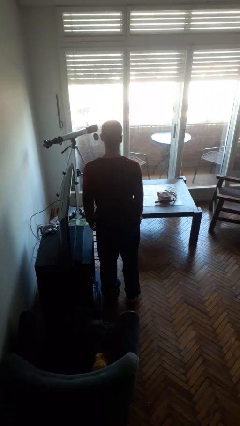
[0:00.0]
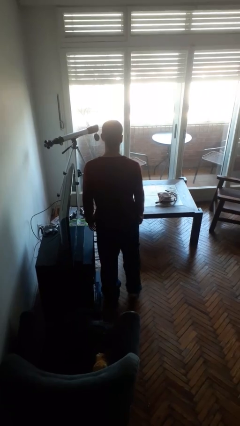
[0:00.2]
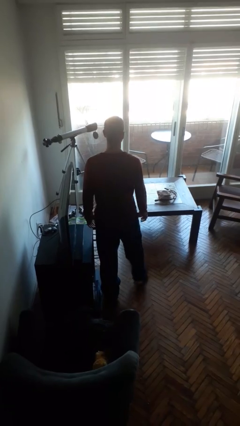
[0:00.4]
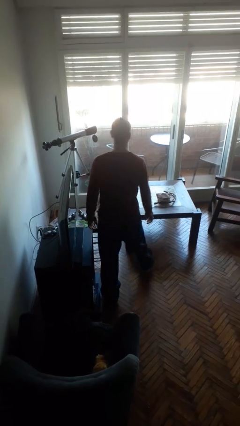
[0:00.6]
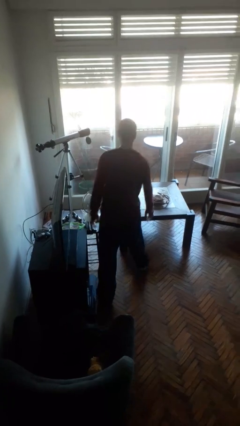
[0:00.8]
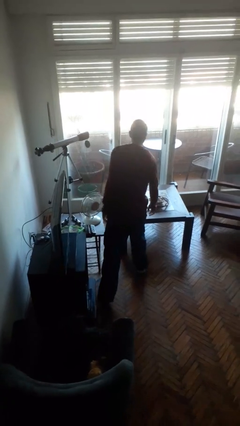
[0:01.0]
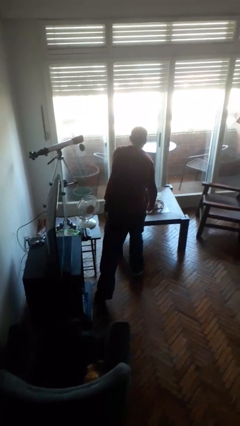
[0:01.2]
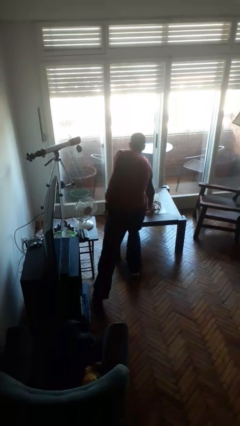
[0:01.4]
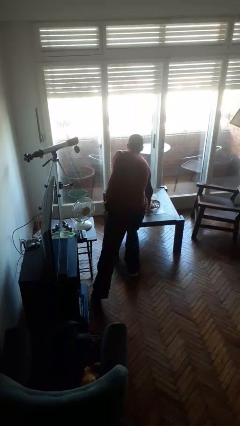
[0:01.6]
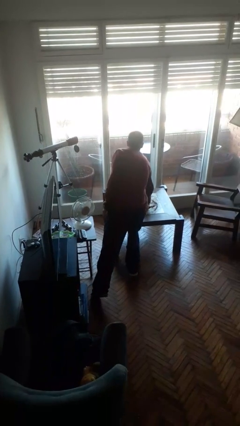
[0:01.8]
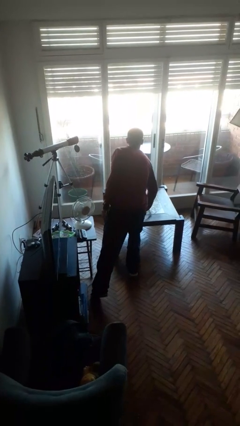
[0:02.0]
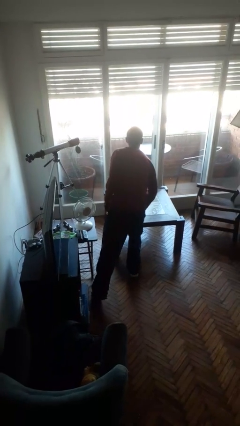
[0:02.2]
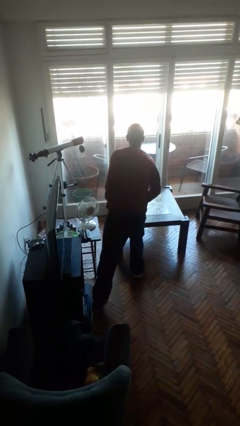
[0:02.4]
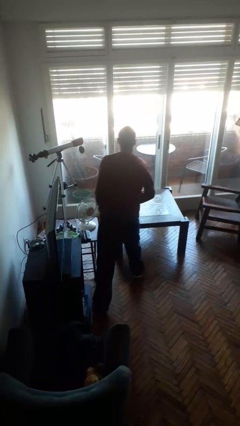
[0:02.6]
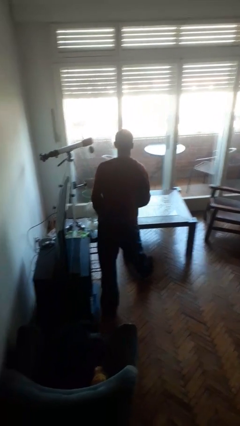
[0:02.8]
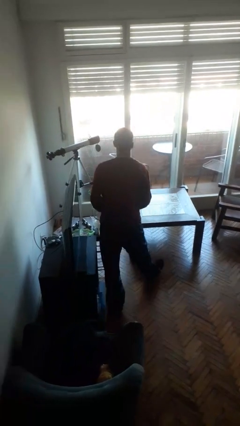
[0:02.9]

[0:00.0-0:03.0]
person picks up object from table

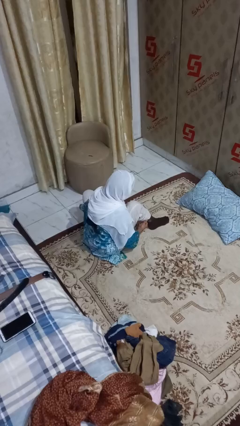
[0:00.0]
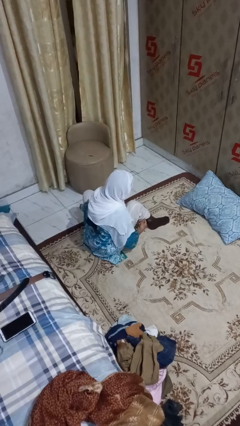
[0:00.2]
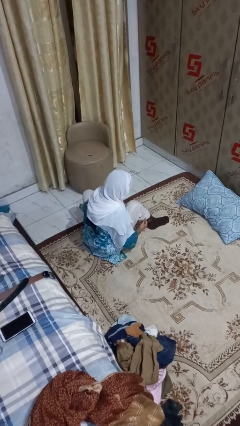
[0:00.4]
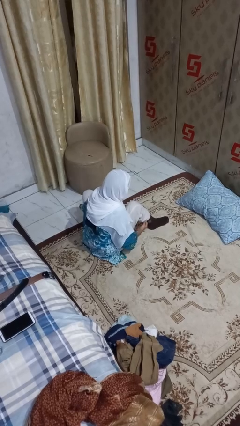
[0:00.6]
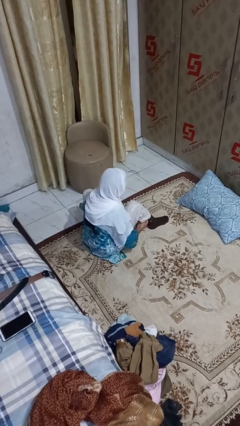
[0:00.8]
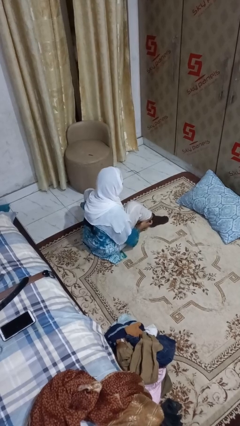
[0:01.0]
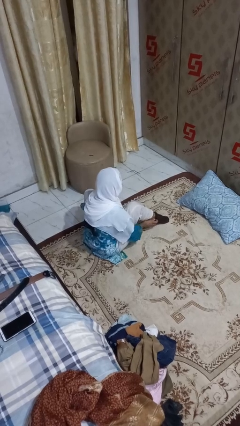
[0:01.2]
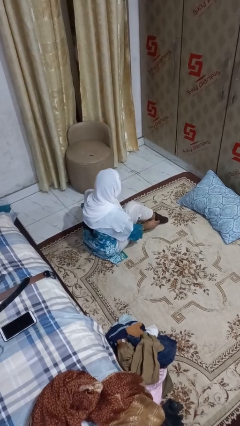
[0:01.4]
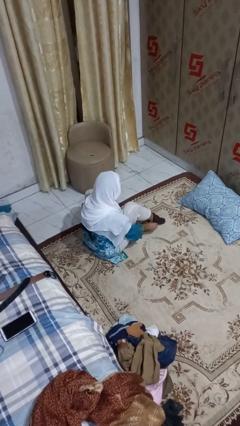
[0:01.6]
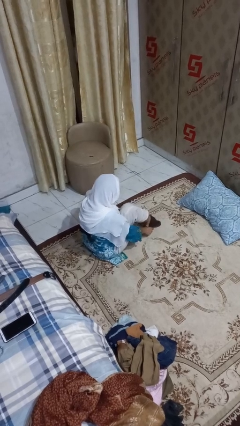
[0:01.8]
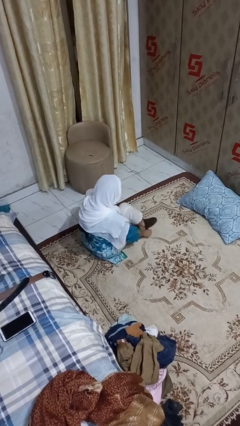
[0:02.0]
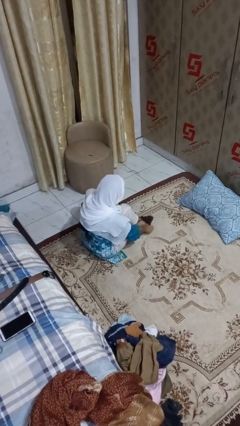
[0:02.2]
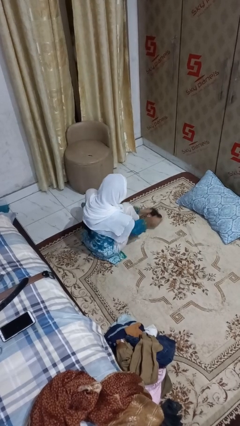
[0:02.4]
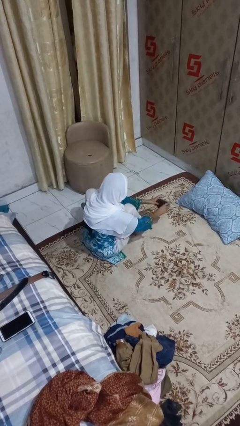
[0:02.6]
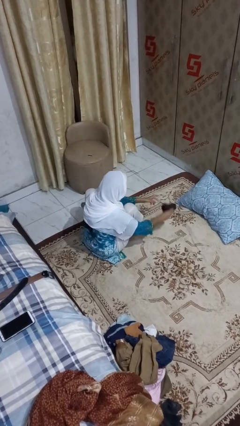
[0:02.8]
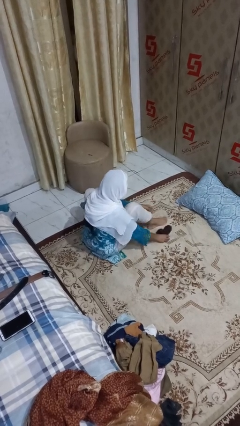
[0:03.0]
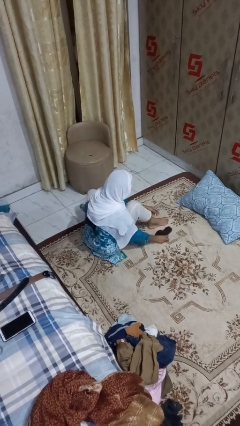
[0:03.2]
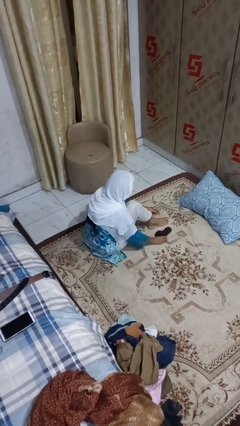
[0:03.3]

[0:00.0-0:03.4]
person takes off socks

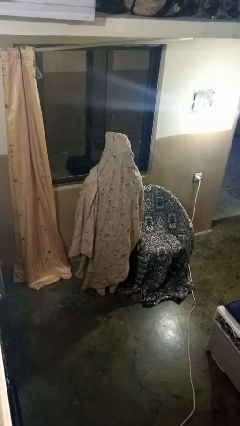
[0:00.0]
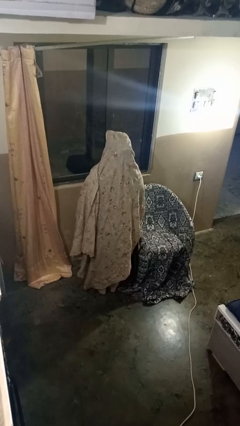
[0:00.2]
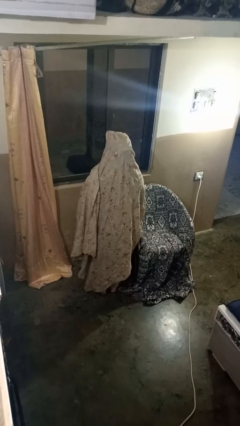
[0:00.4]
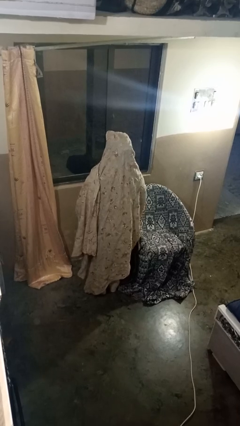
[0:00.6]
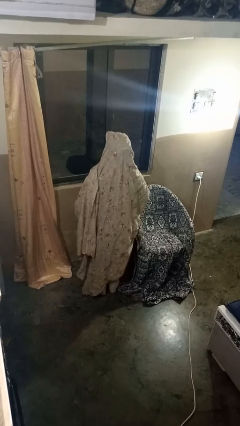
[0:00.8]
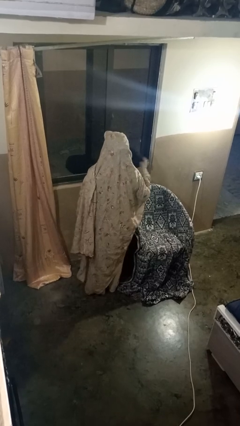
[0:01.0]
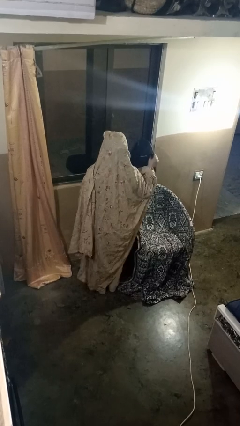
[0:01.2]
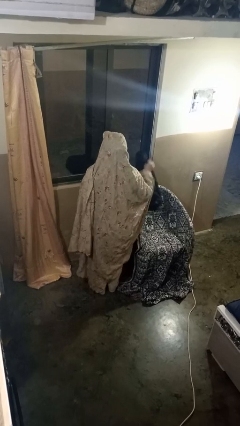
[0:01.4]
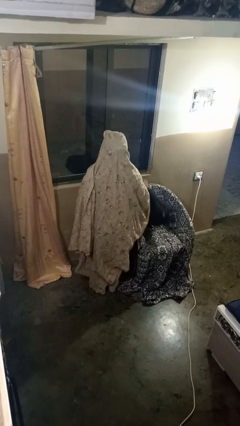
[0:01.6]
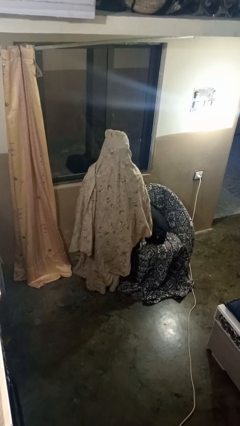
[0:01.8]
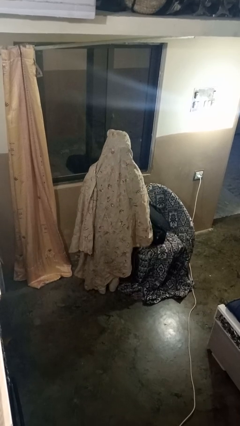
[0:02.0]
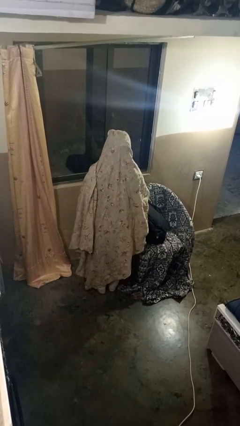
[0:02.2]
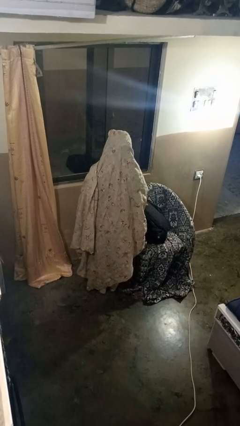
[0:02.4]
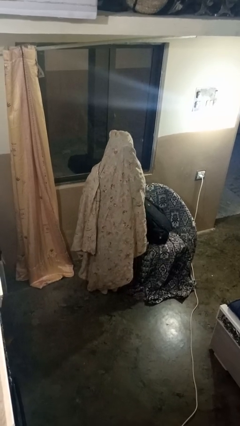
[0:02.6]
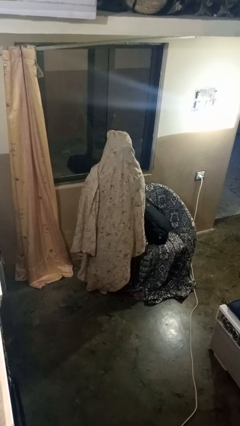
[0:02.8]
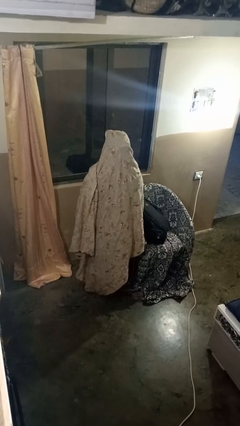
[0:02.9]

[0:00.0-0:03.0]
person puts down object on couch

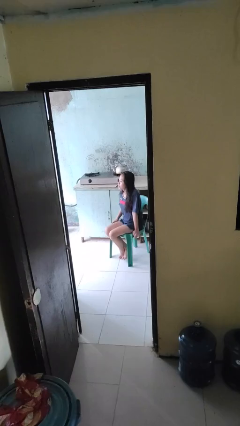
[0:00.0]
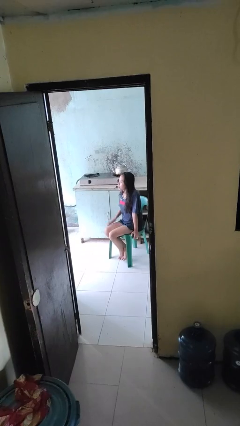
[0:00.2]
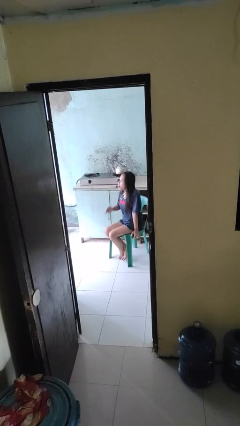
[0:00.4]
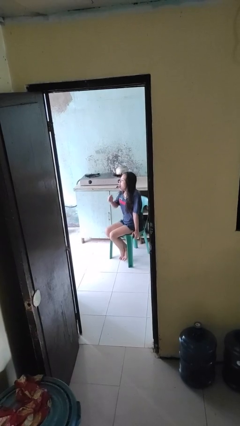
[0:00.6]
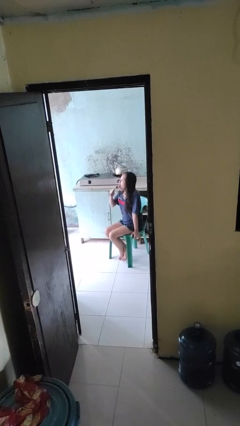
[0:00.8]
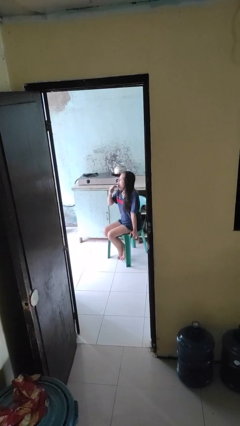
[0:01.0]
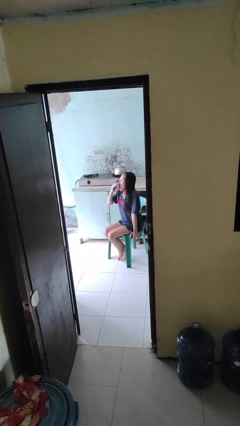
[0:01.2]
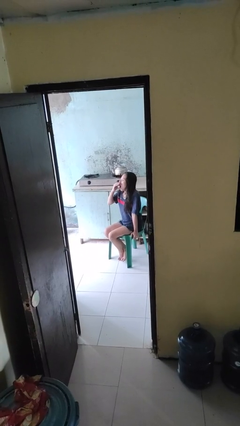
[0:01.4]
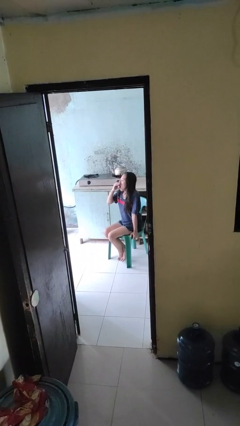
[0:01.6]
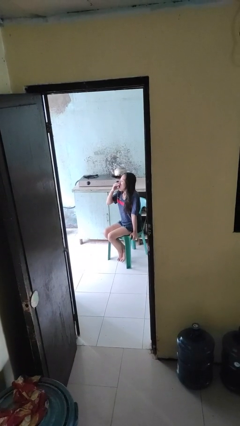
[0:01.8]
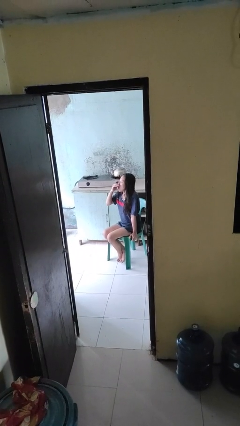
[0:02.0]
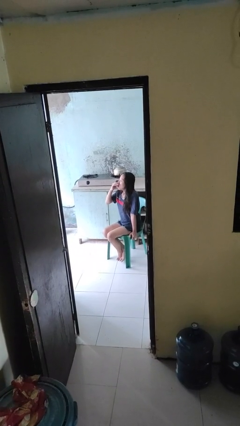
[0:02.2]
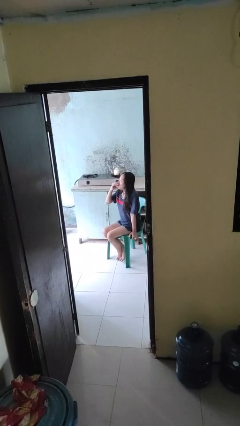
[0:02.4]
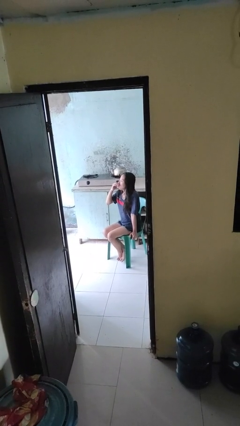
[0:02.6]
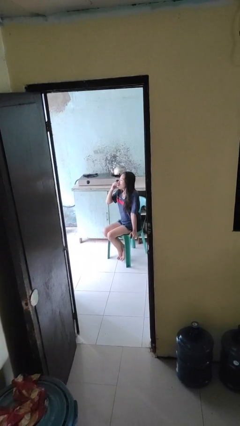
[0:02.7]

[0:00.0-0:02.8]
person yawns

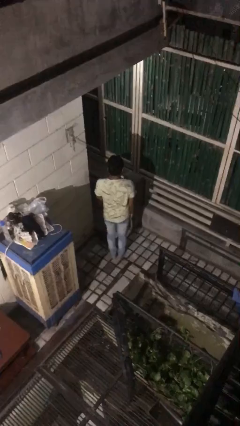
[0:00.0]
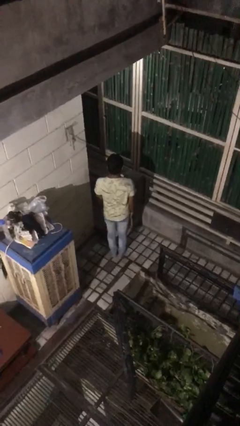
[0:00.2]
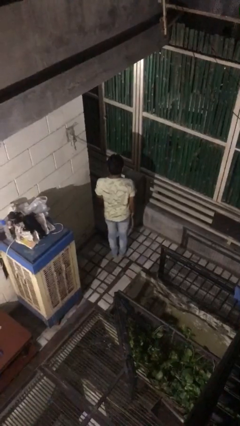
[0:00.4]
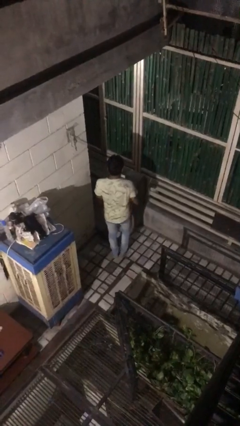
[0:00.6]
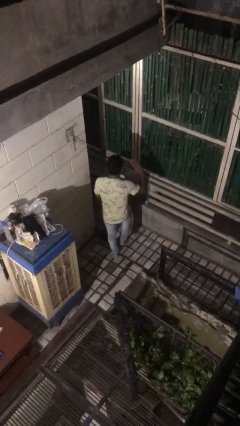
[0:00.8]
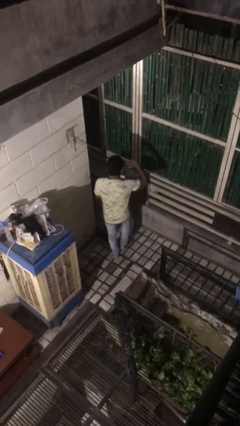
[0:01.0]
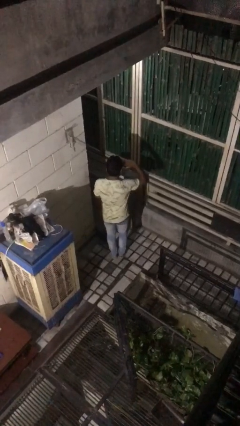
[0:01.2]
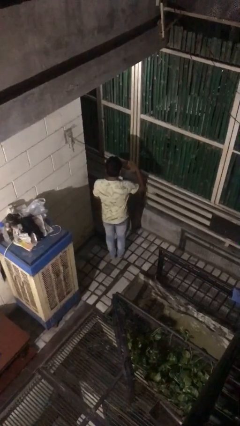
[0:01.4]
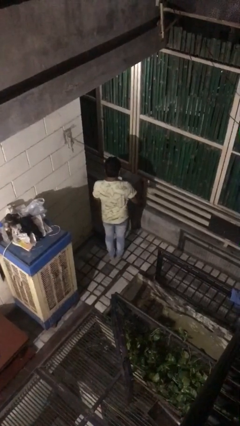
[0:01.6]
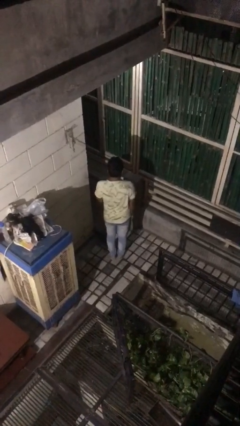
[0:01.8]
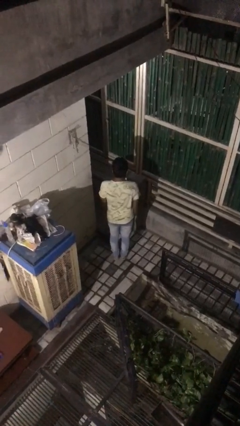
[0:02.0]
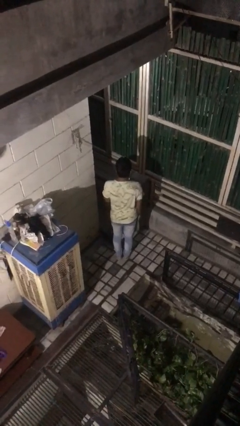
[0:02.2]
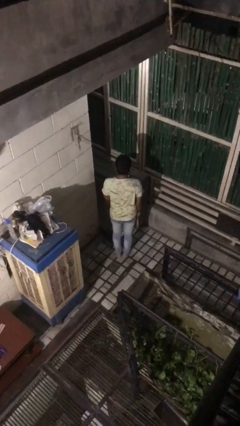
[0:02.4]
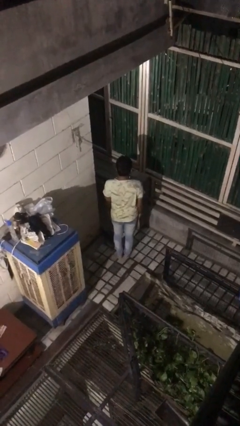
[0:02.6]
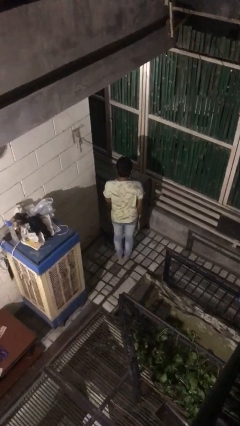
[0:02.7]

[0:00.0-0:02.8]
person salutes

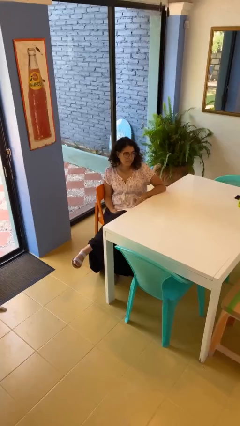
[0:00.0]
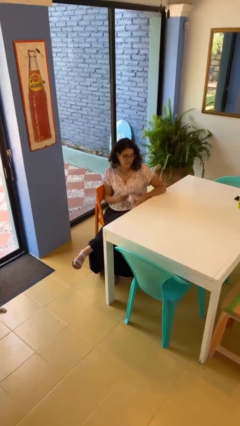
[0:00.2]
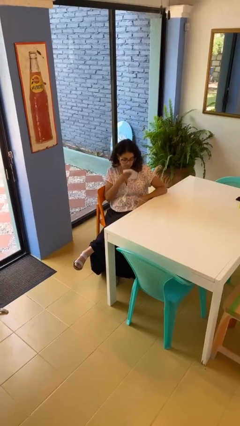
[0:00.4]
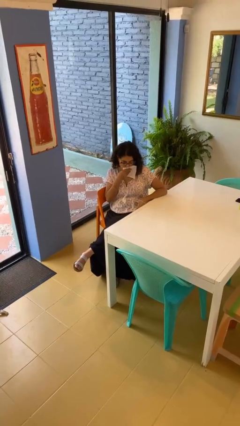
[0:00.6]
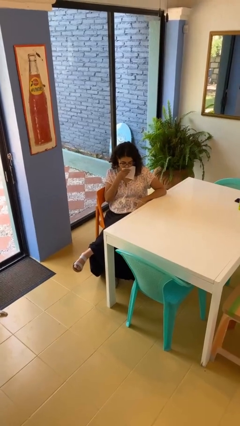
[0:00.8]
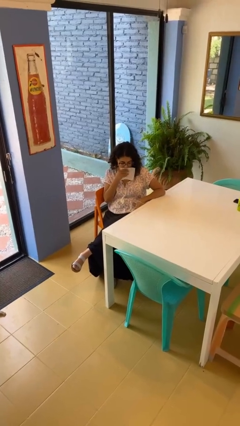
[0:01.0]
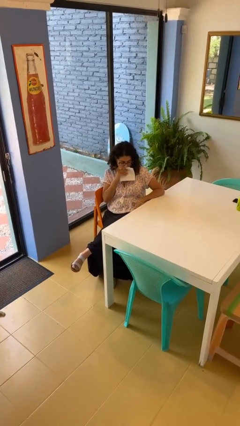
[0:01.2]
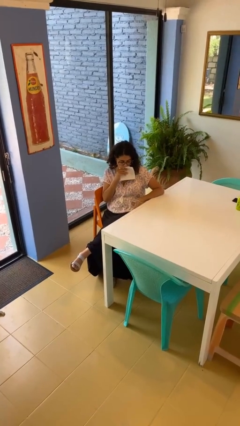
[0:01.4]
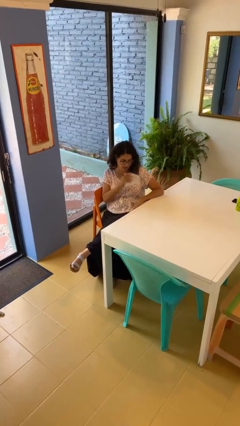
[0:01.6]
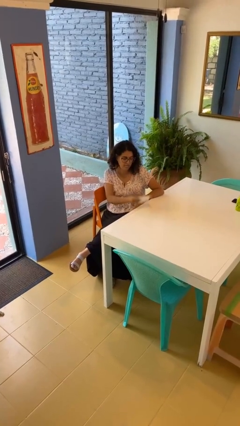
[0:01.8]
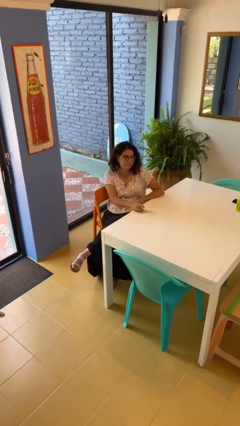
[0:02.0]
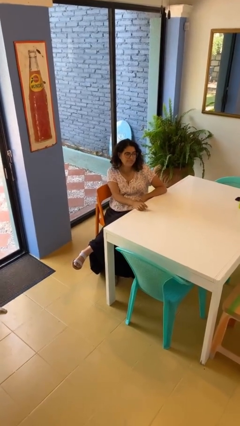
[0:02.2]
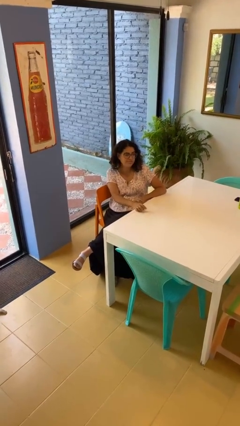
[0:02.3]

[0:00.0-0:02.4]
person wipes mouth with napkin

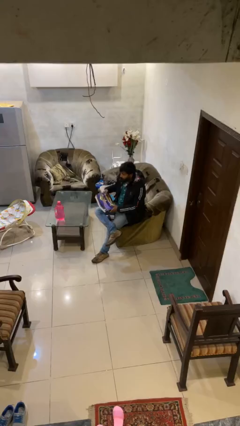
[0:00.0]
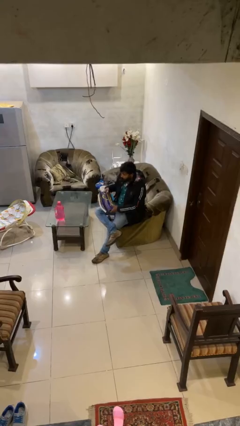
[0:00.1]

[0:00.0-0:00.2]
person reads document
